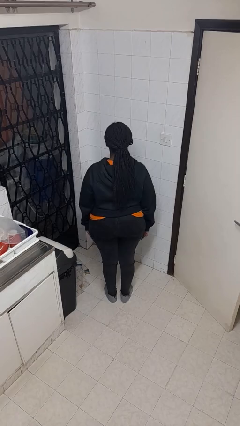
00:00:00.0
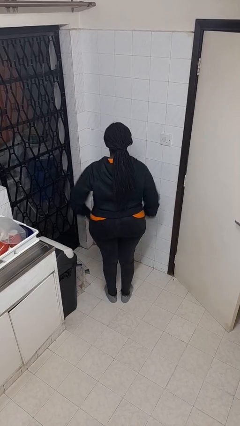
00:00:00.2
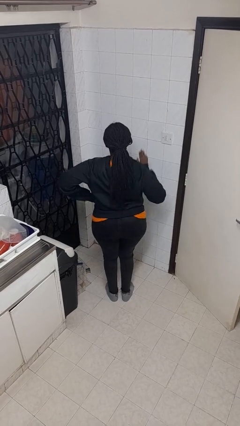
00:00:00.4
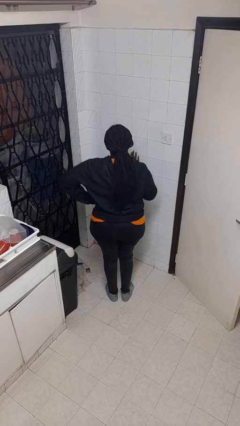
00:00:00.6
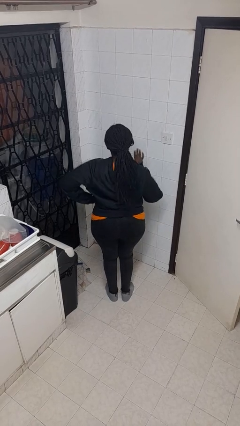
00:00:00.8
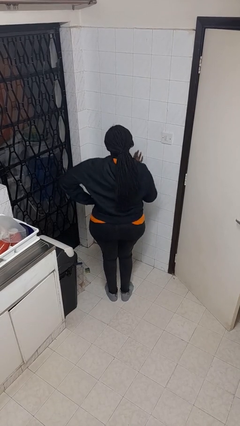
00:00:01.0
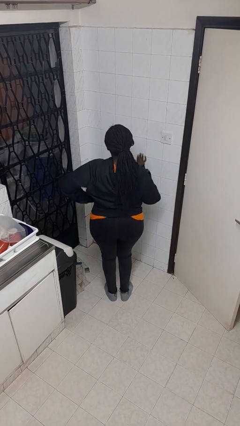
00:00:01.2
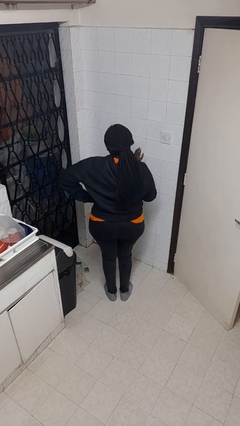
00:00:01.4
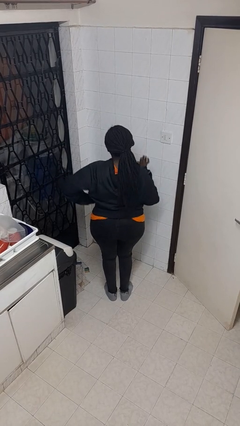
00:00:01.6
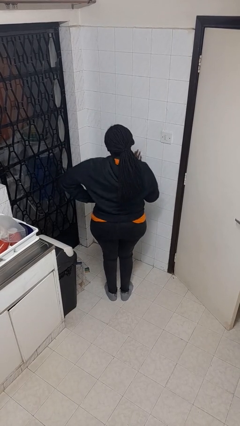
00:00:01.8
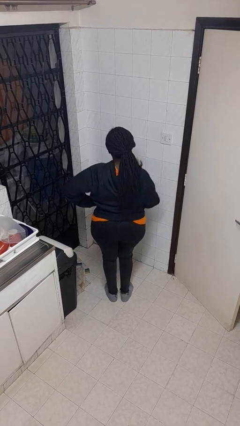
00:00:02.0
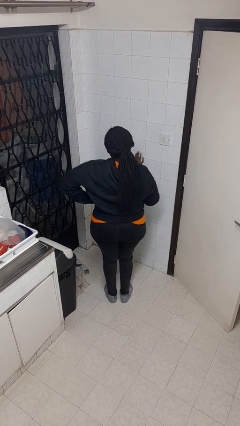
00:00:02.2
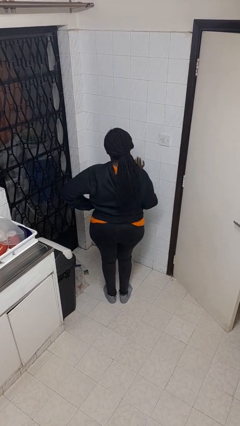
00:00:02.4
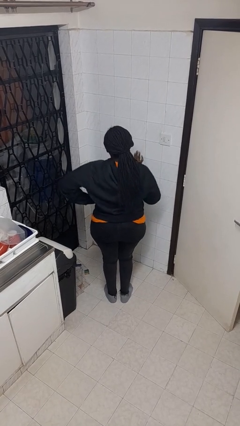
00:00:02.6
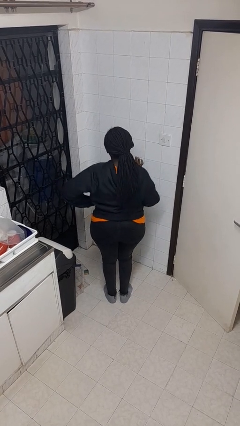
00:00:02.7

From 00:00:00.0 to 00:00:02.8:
person dances in place

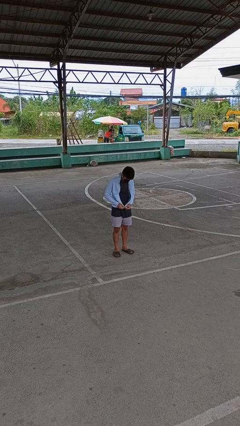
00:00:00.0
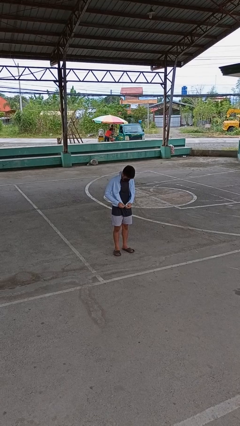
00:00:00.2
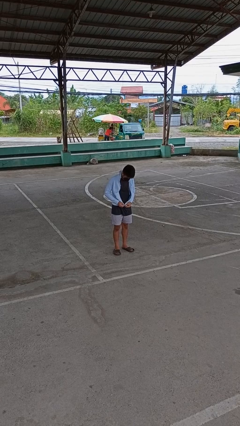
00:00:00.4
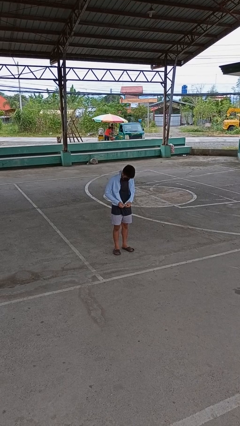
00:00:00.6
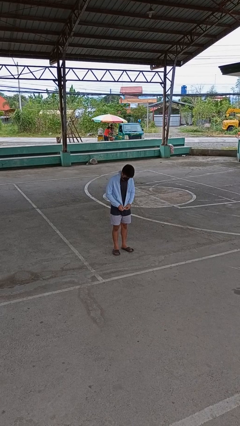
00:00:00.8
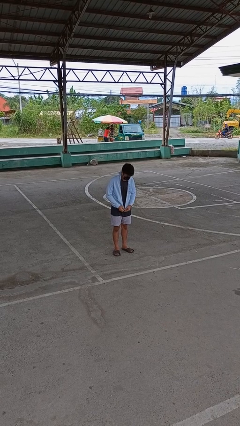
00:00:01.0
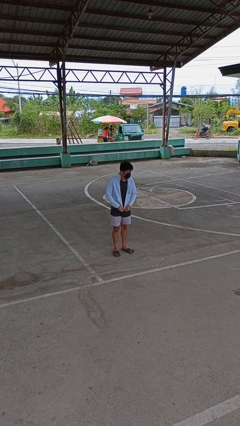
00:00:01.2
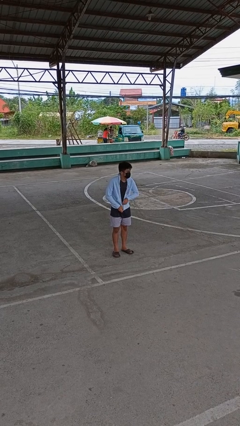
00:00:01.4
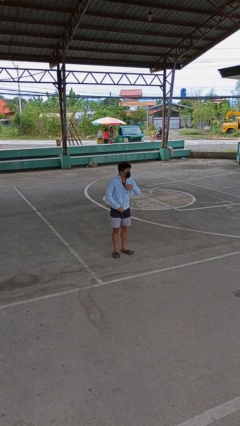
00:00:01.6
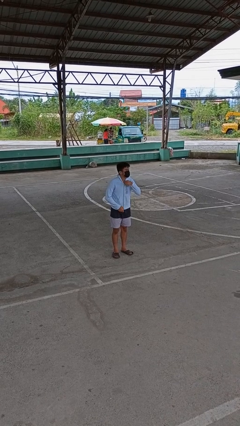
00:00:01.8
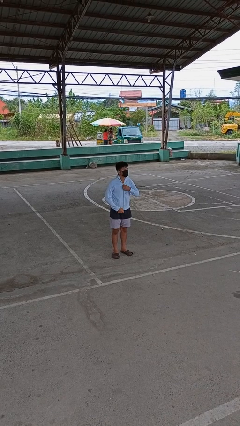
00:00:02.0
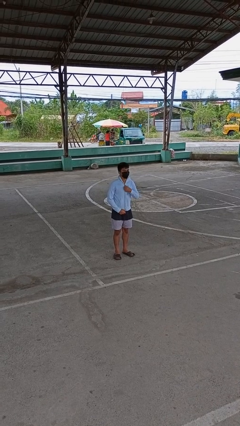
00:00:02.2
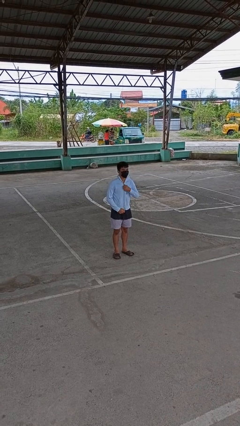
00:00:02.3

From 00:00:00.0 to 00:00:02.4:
person zips up jacket

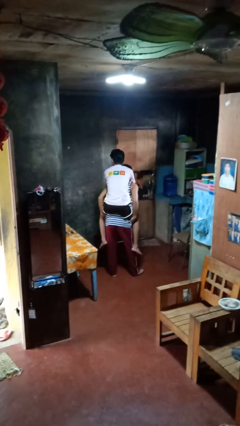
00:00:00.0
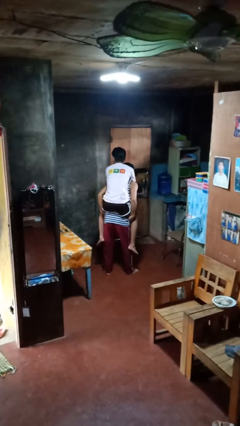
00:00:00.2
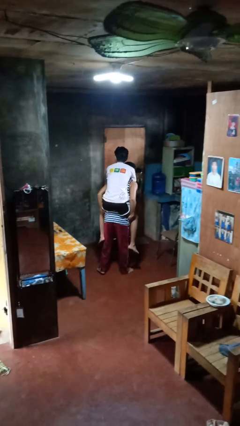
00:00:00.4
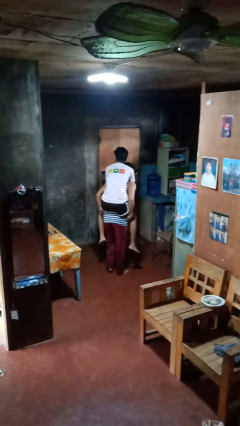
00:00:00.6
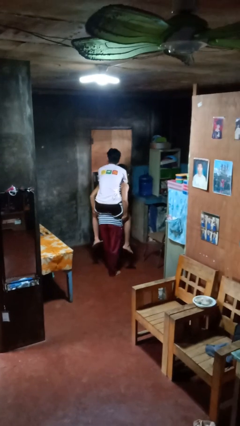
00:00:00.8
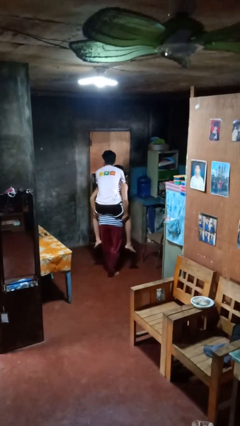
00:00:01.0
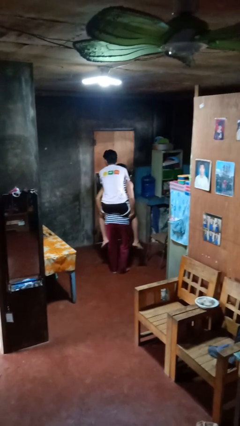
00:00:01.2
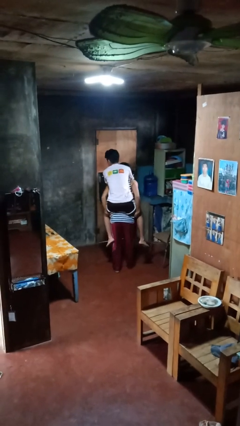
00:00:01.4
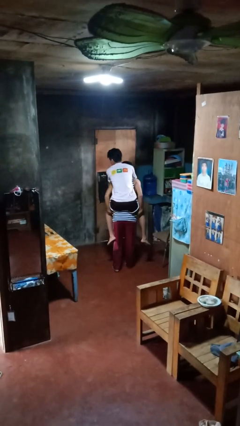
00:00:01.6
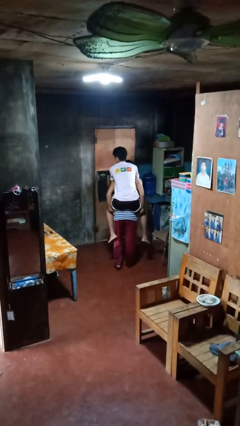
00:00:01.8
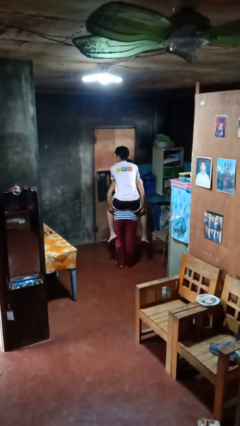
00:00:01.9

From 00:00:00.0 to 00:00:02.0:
person carries person on back

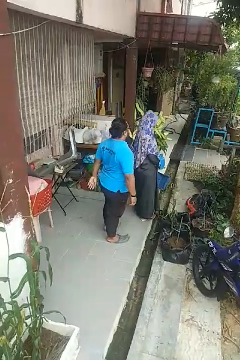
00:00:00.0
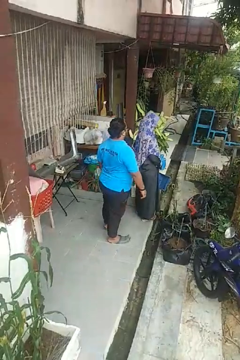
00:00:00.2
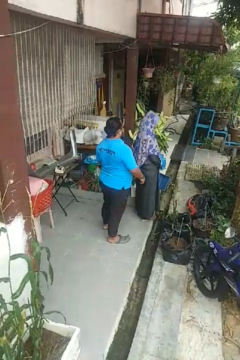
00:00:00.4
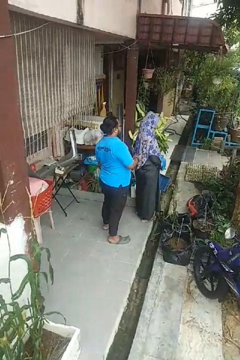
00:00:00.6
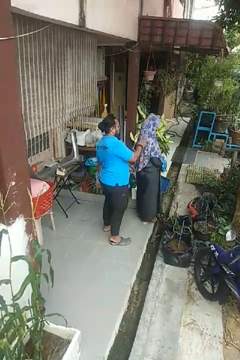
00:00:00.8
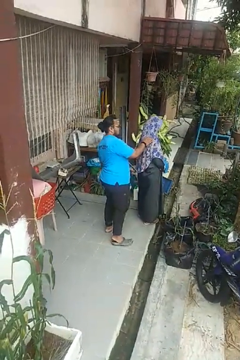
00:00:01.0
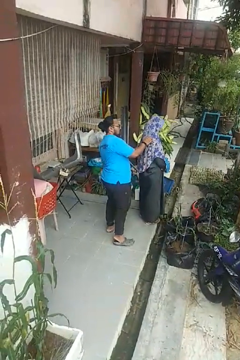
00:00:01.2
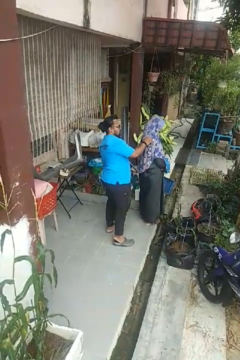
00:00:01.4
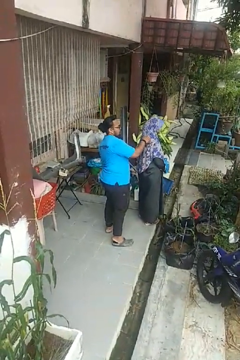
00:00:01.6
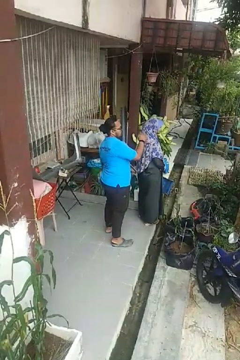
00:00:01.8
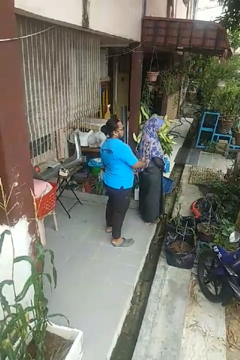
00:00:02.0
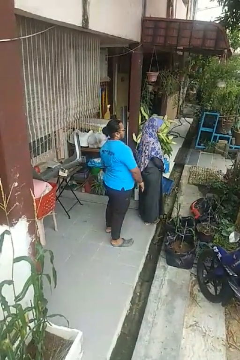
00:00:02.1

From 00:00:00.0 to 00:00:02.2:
person touches back of person

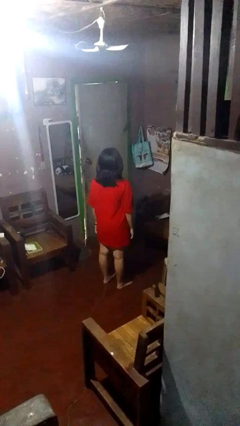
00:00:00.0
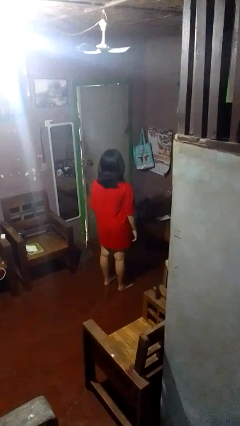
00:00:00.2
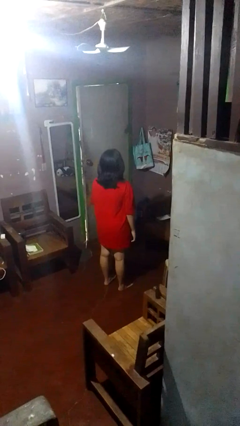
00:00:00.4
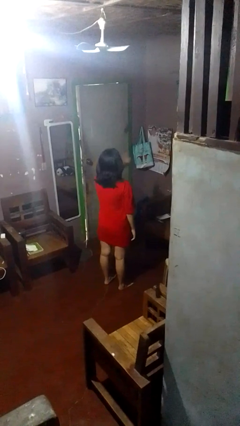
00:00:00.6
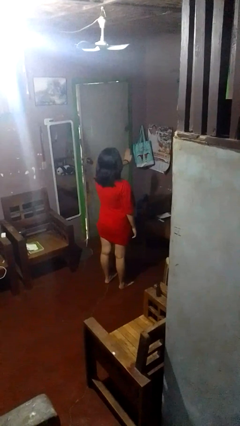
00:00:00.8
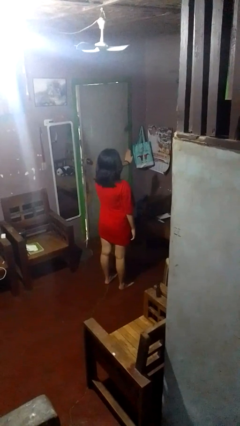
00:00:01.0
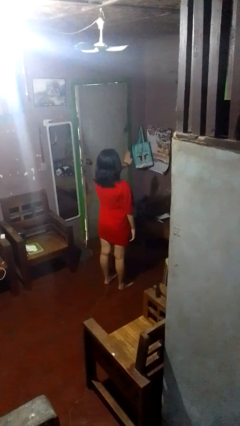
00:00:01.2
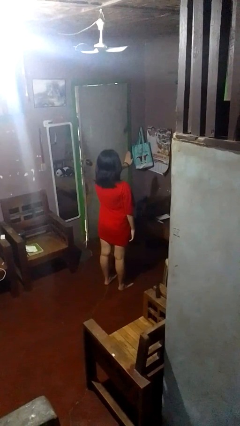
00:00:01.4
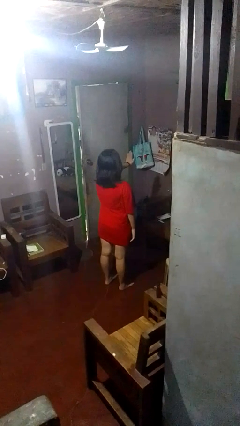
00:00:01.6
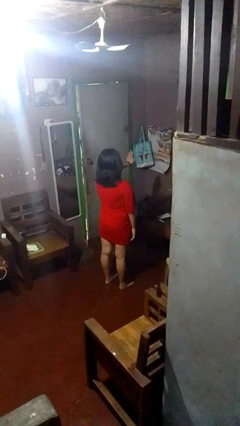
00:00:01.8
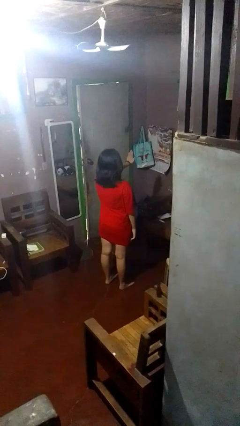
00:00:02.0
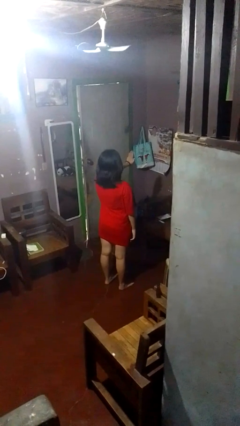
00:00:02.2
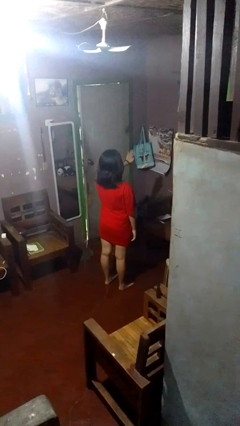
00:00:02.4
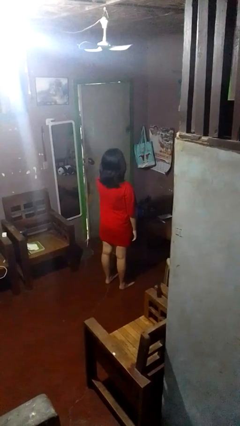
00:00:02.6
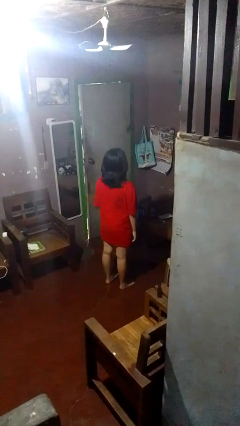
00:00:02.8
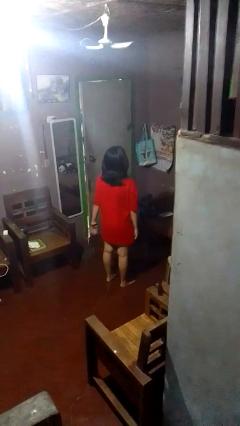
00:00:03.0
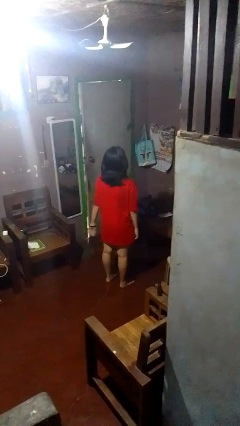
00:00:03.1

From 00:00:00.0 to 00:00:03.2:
person gestures stop

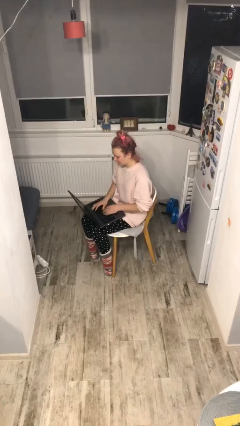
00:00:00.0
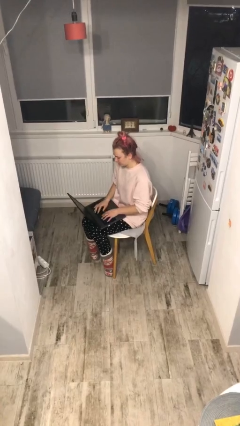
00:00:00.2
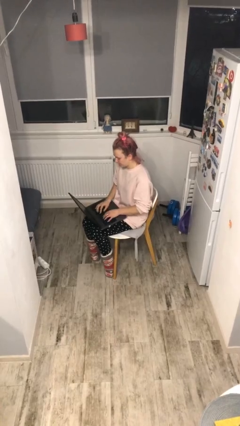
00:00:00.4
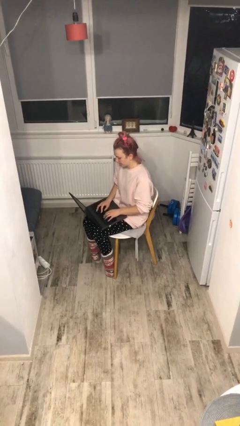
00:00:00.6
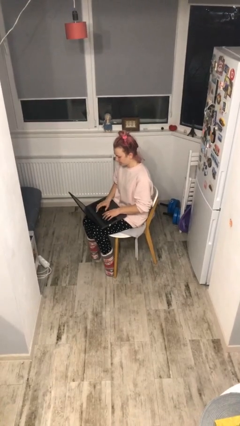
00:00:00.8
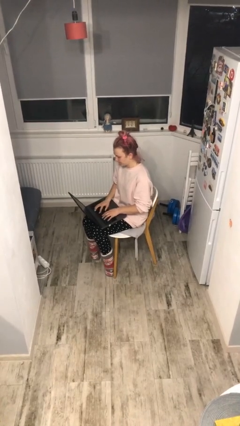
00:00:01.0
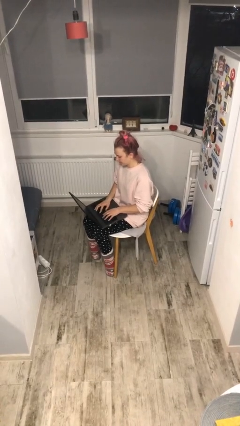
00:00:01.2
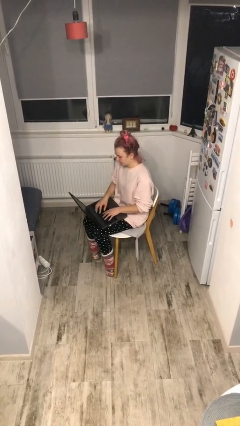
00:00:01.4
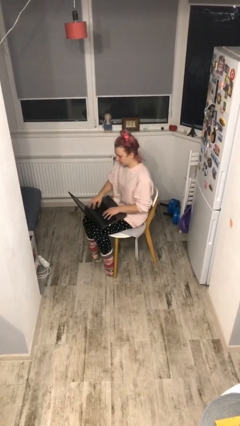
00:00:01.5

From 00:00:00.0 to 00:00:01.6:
person interacts with laptop

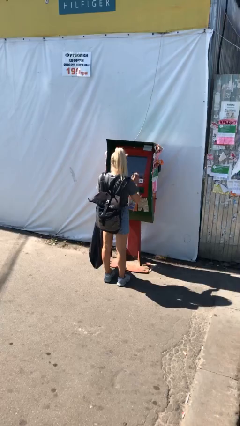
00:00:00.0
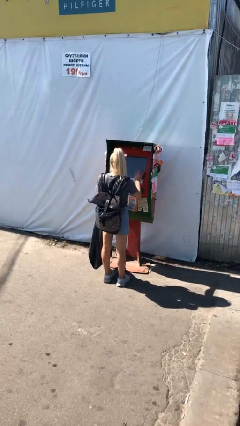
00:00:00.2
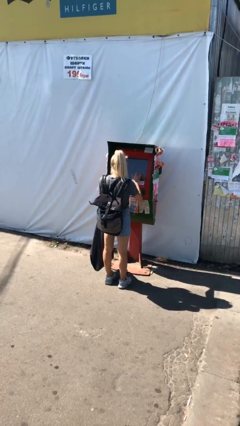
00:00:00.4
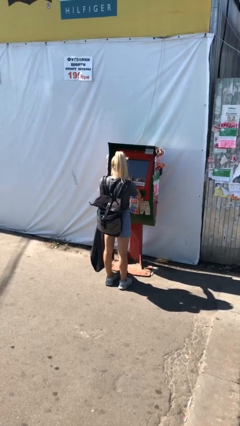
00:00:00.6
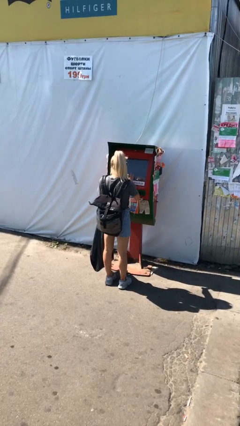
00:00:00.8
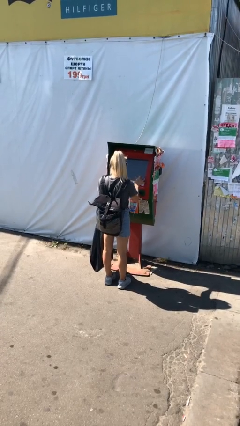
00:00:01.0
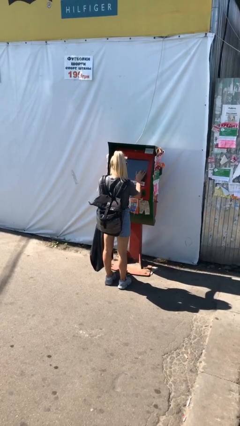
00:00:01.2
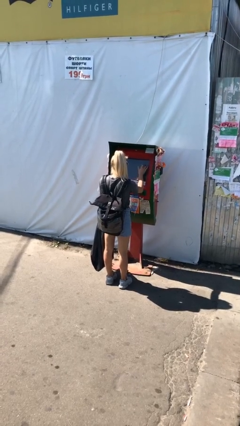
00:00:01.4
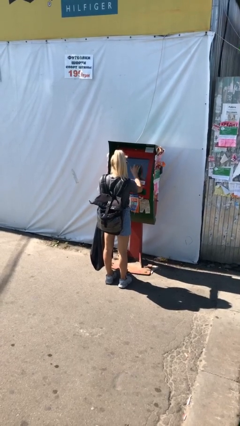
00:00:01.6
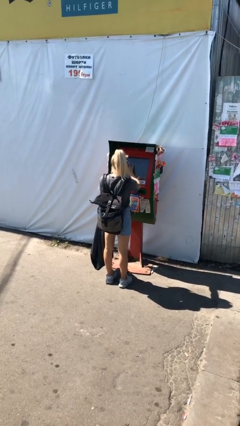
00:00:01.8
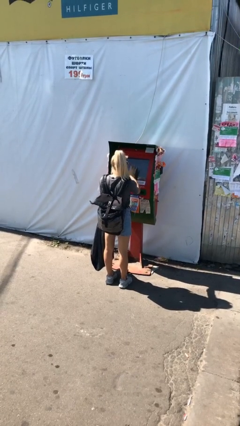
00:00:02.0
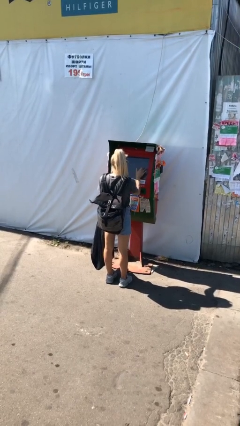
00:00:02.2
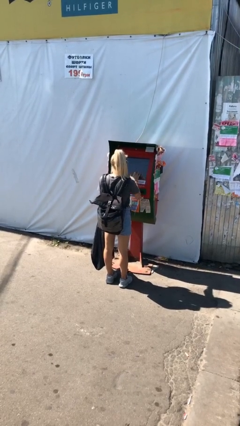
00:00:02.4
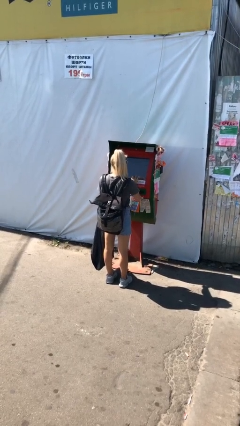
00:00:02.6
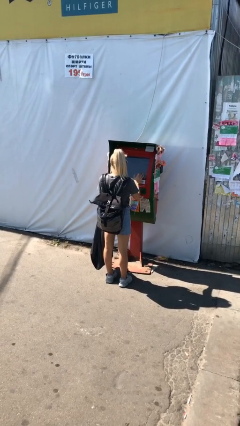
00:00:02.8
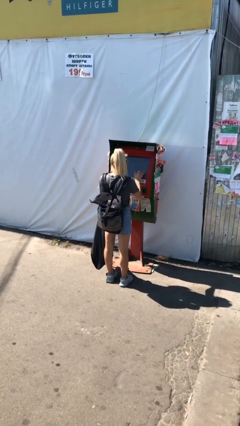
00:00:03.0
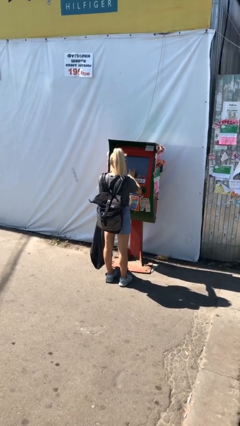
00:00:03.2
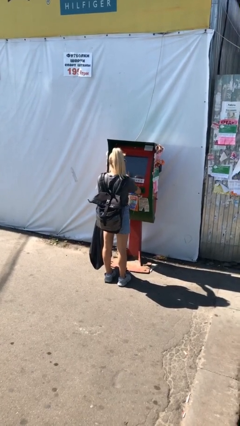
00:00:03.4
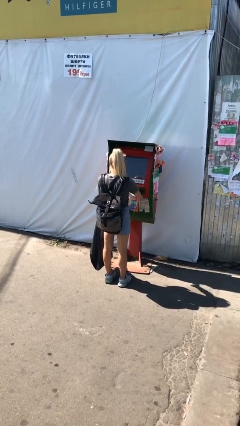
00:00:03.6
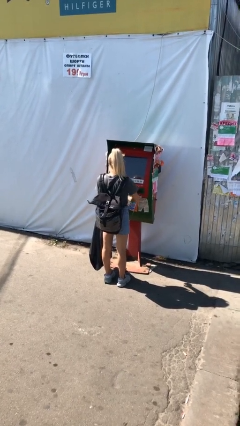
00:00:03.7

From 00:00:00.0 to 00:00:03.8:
person purchases from machine
